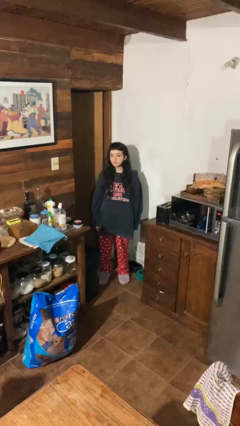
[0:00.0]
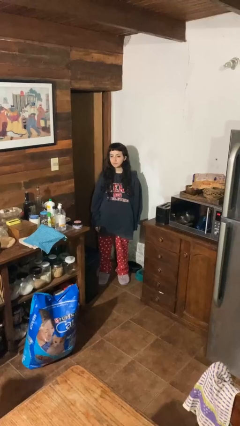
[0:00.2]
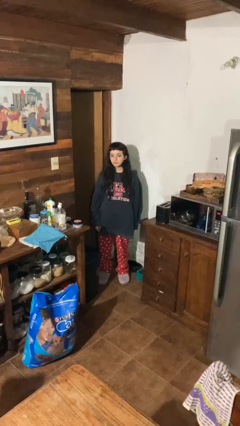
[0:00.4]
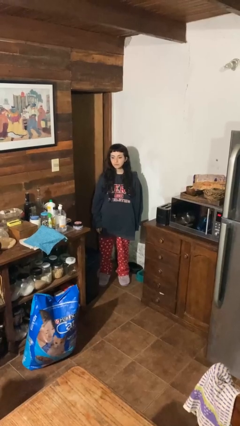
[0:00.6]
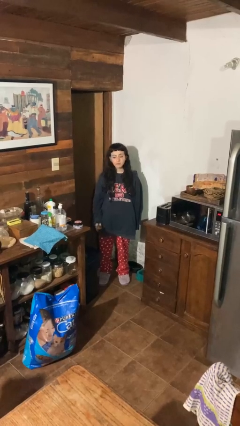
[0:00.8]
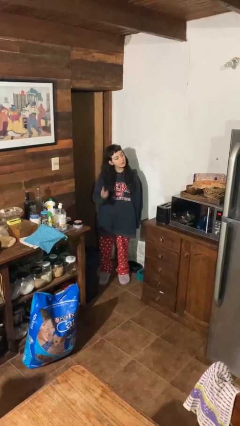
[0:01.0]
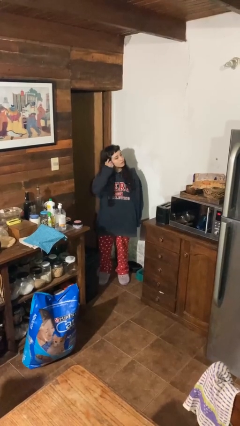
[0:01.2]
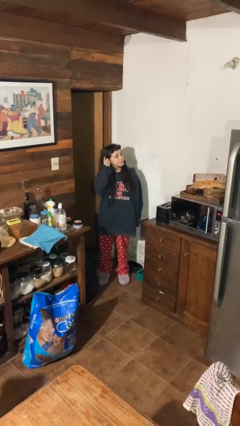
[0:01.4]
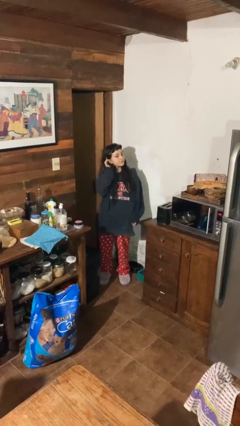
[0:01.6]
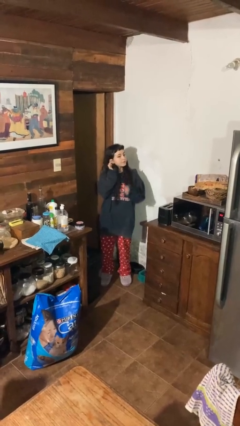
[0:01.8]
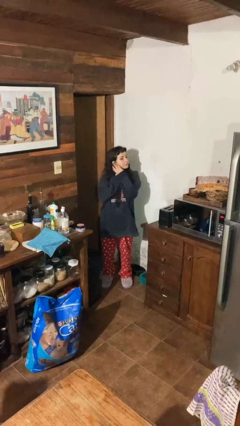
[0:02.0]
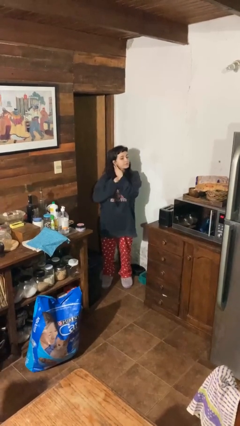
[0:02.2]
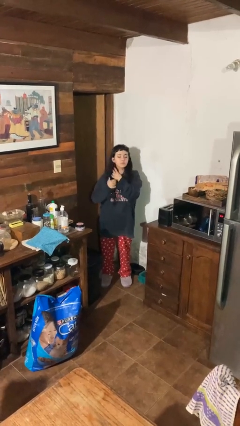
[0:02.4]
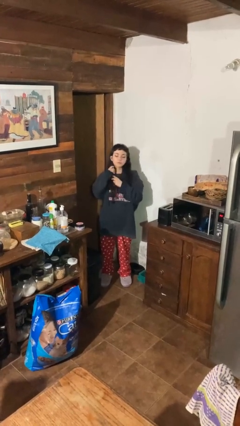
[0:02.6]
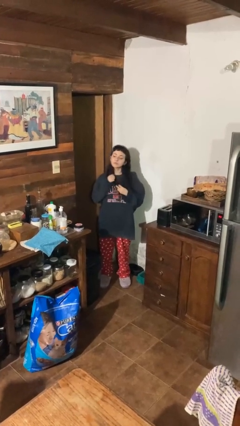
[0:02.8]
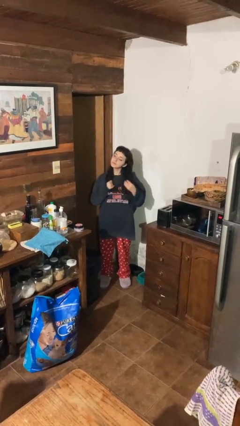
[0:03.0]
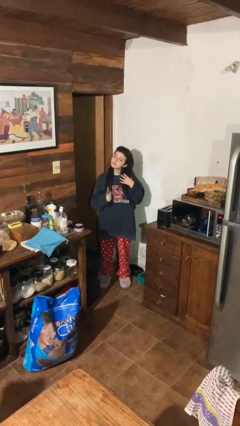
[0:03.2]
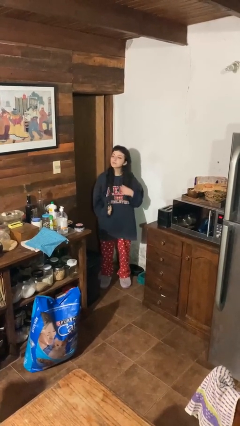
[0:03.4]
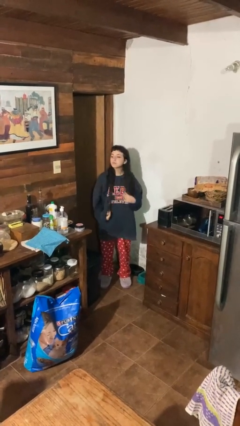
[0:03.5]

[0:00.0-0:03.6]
person strokes hair

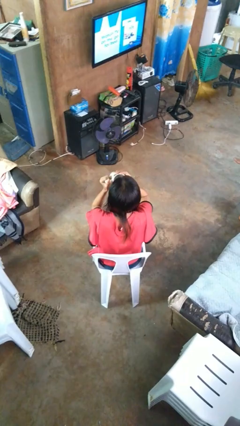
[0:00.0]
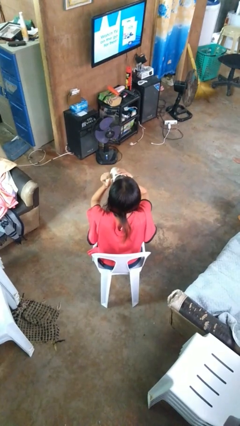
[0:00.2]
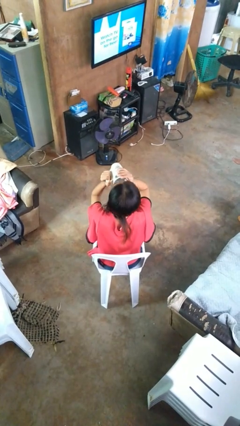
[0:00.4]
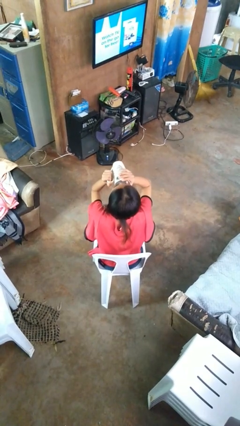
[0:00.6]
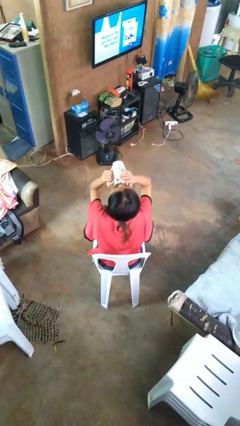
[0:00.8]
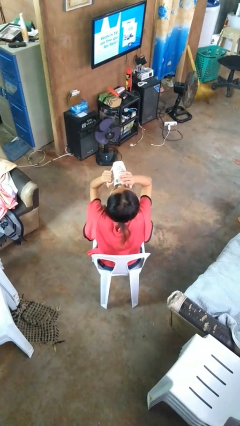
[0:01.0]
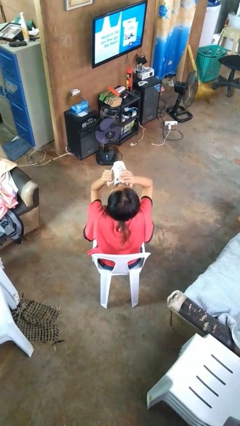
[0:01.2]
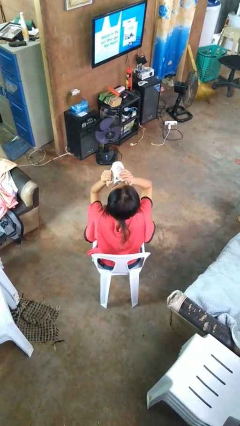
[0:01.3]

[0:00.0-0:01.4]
person drinks from mug

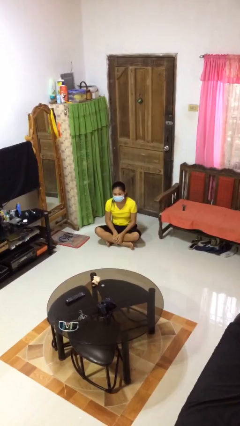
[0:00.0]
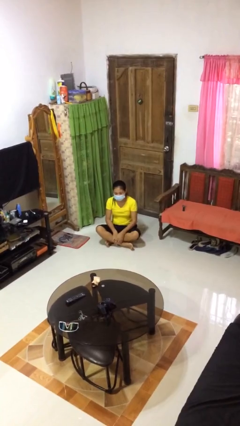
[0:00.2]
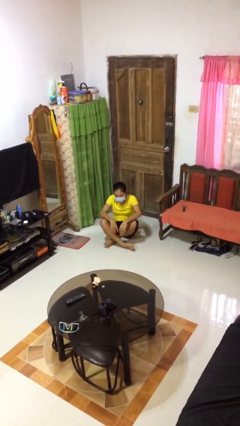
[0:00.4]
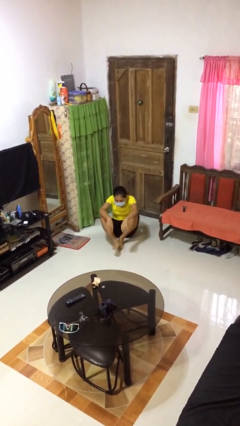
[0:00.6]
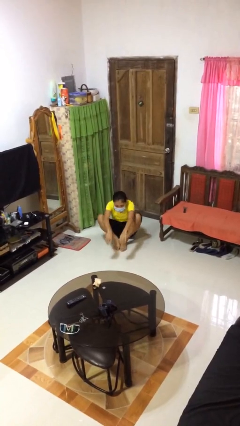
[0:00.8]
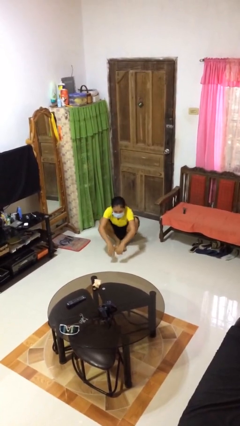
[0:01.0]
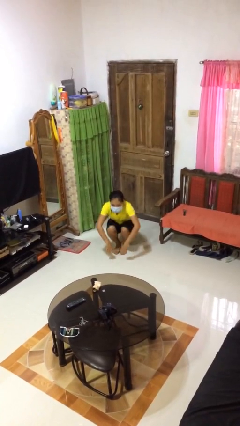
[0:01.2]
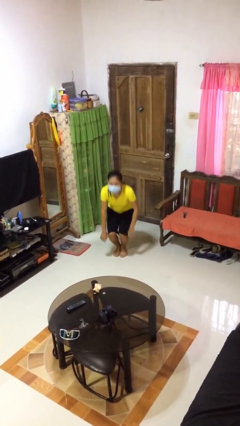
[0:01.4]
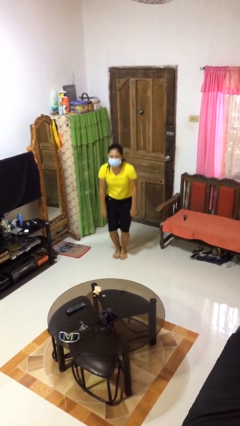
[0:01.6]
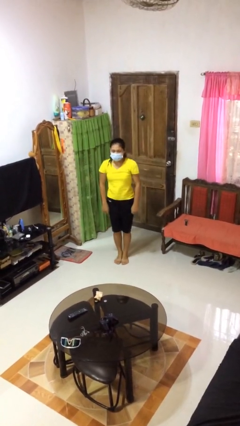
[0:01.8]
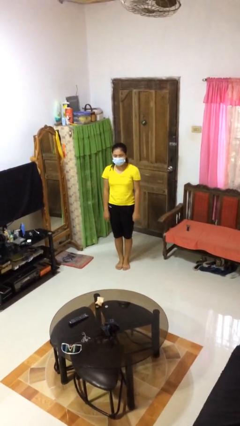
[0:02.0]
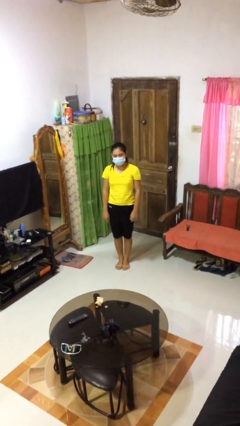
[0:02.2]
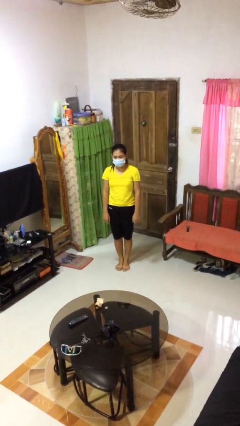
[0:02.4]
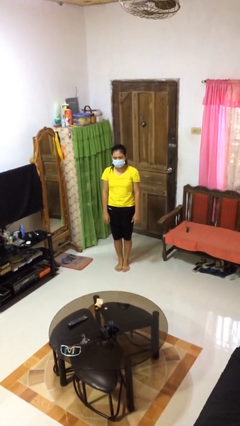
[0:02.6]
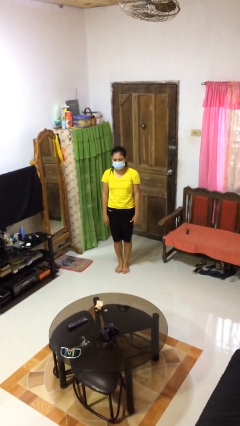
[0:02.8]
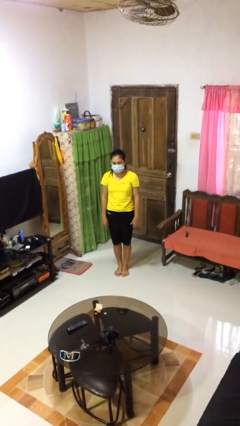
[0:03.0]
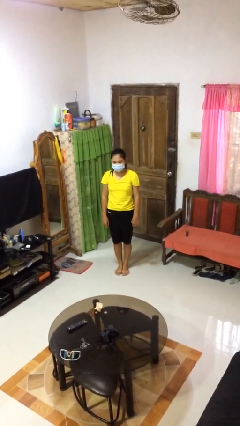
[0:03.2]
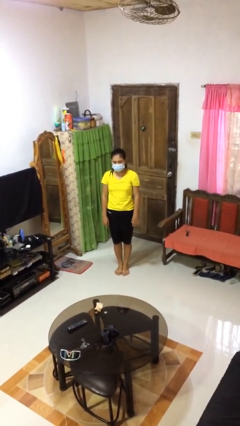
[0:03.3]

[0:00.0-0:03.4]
person stands up from floor

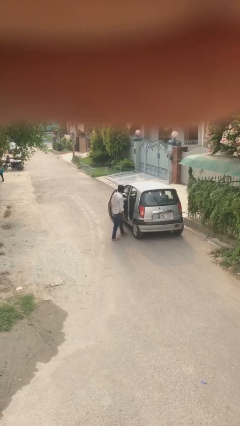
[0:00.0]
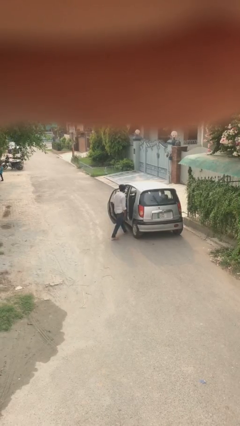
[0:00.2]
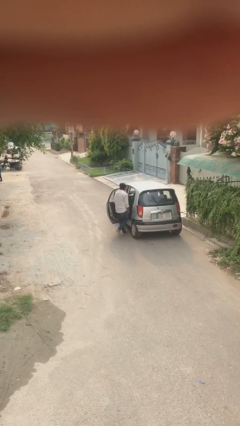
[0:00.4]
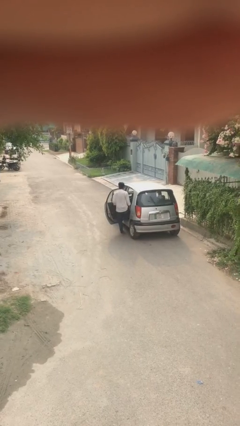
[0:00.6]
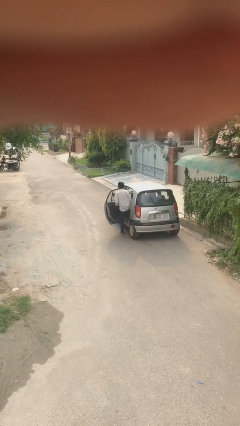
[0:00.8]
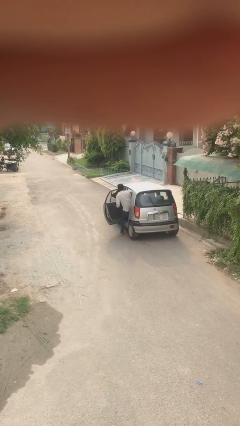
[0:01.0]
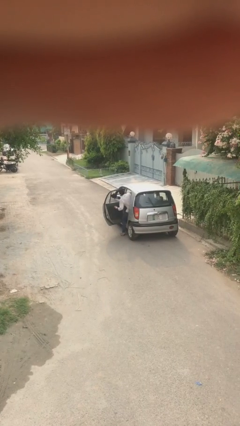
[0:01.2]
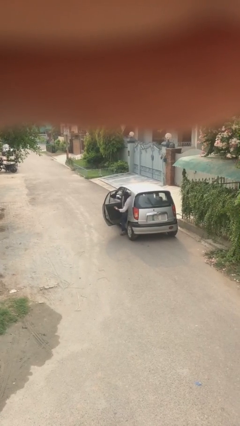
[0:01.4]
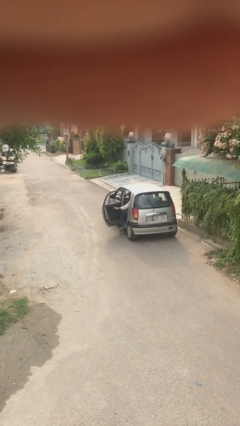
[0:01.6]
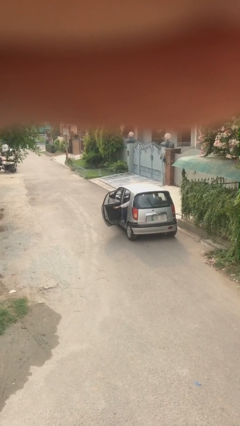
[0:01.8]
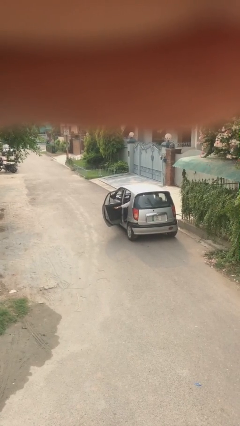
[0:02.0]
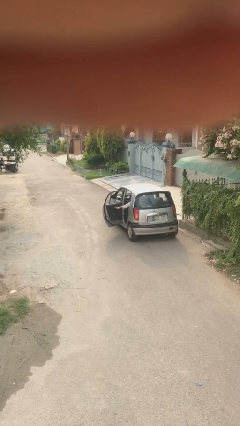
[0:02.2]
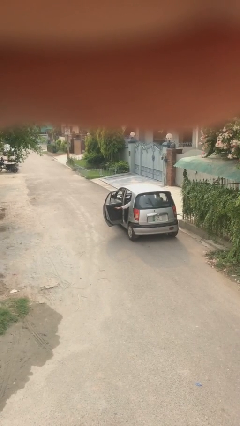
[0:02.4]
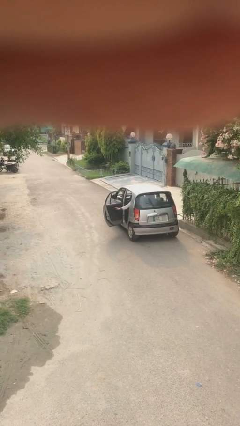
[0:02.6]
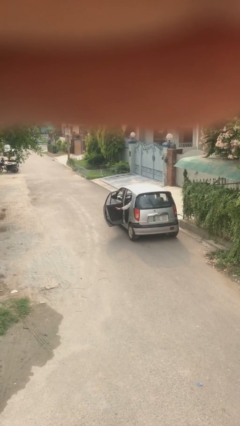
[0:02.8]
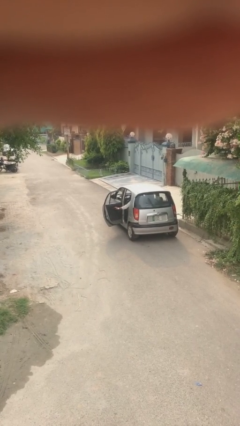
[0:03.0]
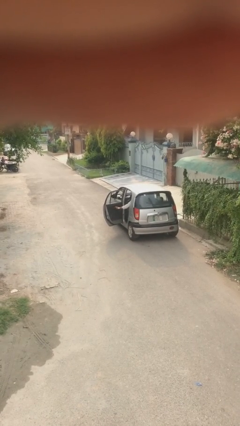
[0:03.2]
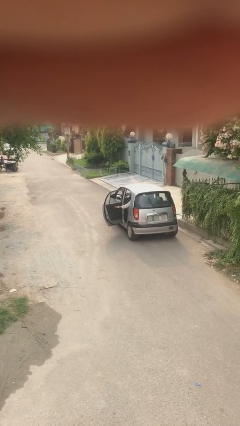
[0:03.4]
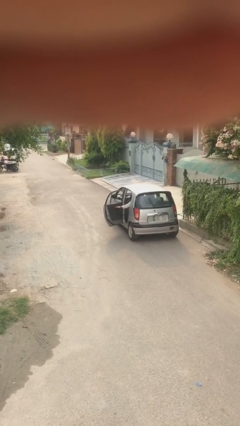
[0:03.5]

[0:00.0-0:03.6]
person enters car

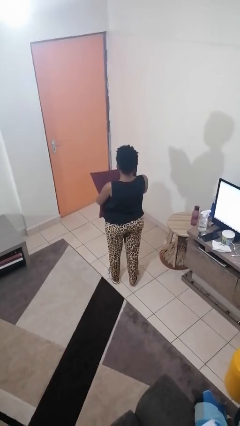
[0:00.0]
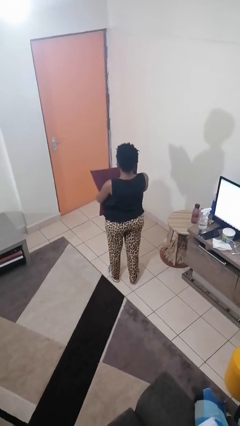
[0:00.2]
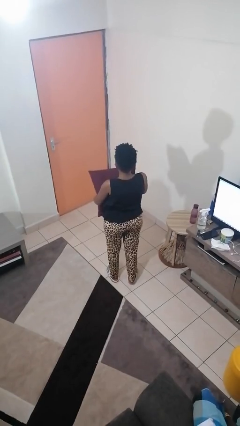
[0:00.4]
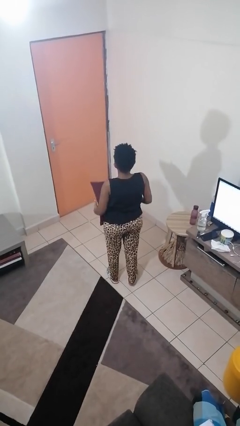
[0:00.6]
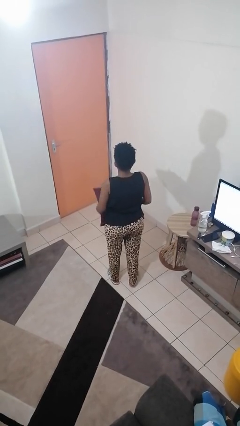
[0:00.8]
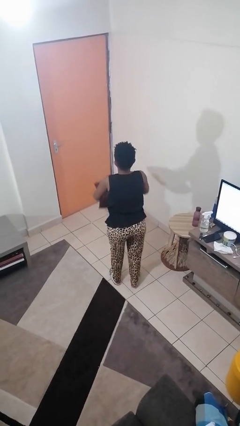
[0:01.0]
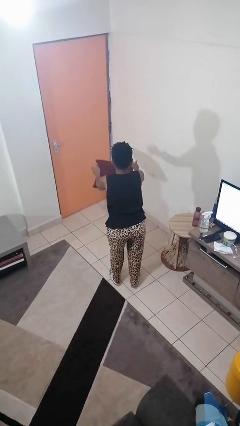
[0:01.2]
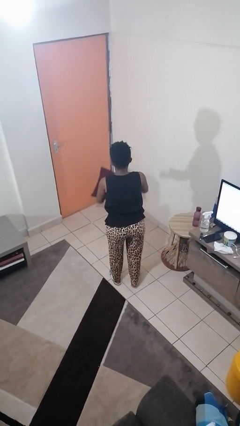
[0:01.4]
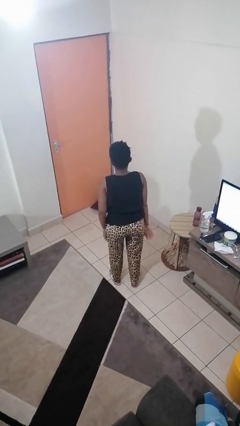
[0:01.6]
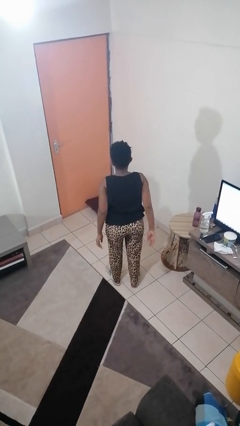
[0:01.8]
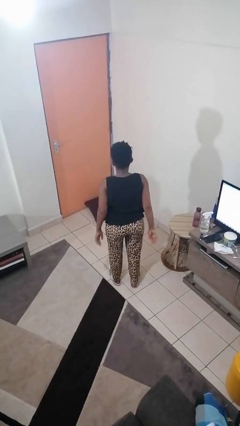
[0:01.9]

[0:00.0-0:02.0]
person throws object to ground

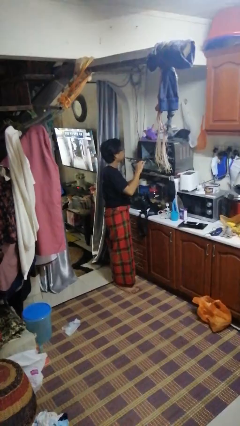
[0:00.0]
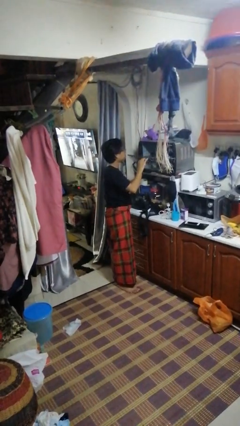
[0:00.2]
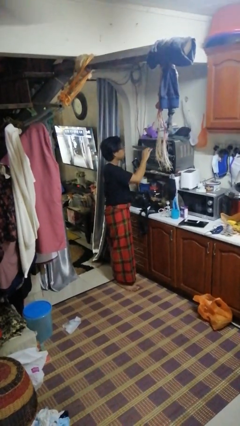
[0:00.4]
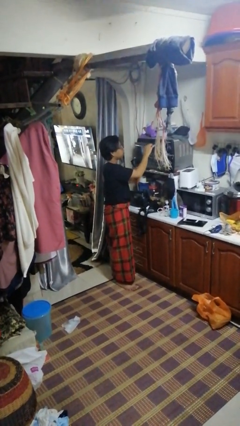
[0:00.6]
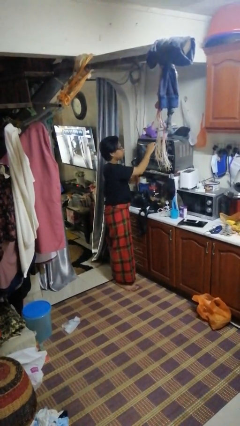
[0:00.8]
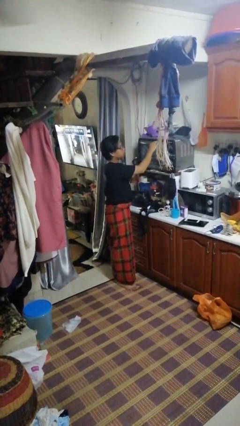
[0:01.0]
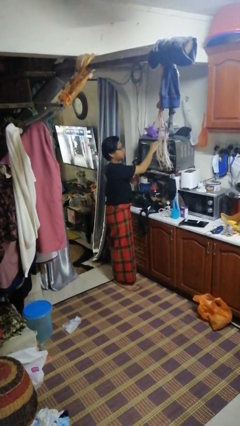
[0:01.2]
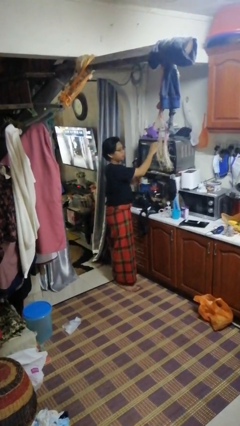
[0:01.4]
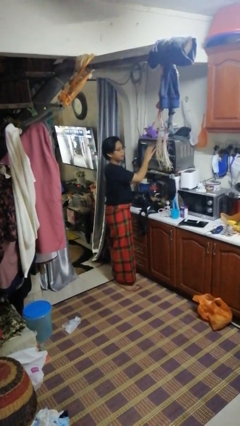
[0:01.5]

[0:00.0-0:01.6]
person closes oven door

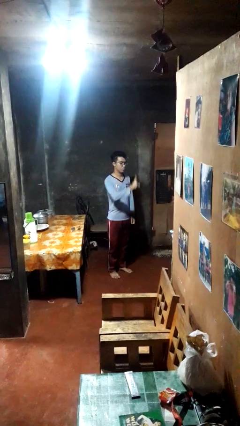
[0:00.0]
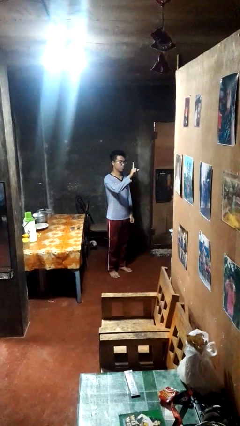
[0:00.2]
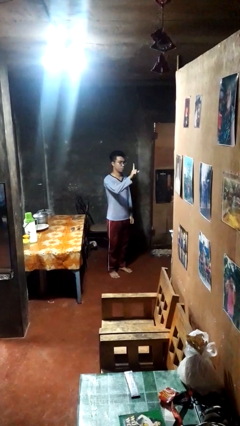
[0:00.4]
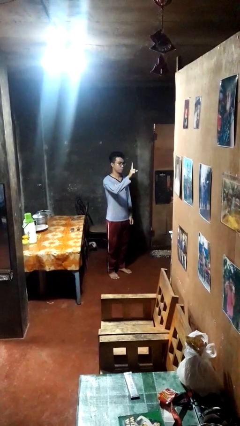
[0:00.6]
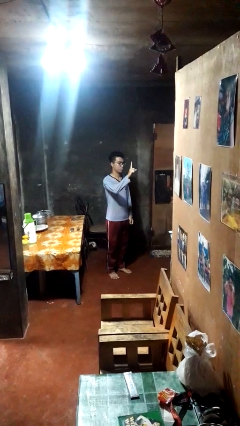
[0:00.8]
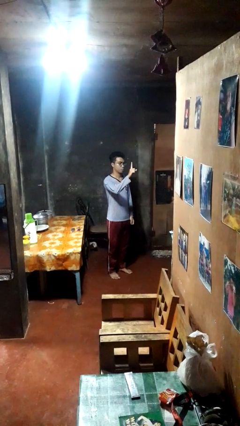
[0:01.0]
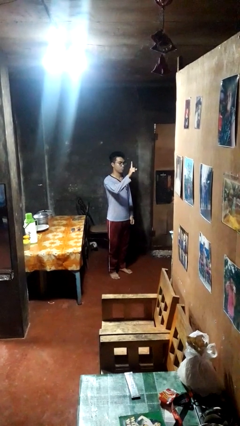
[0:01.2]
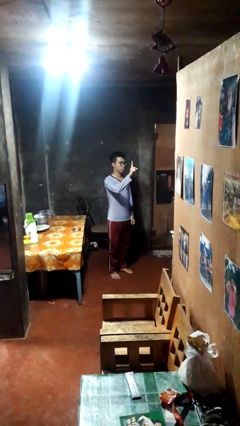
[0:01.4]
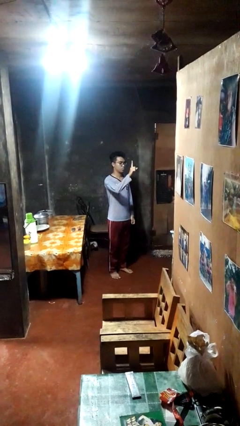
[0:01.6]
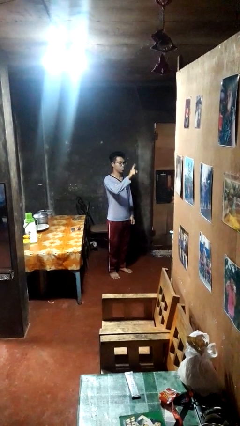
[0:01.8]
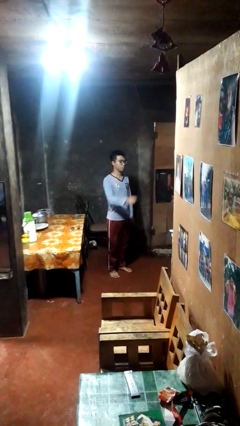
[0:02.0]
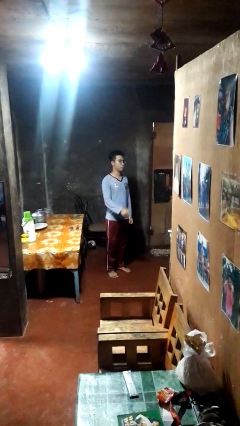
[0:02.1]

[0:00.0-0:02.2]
person gestures number one
